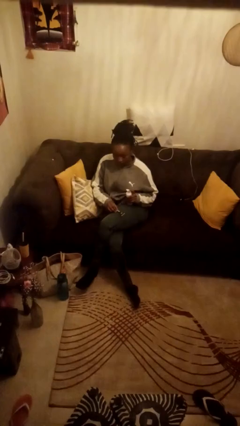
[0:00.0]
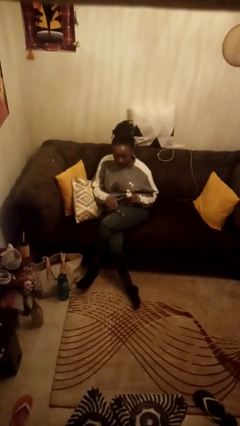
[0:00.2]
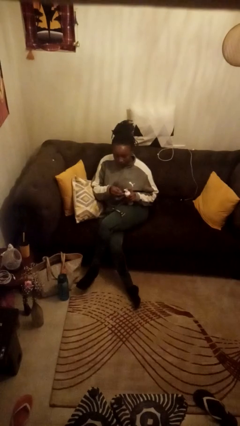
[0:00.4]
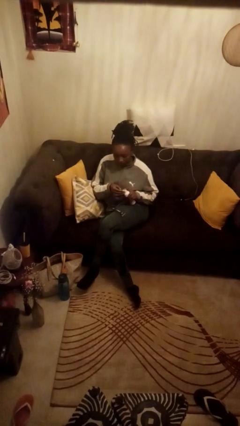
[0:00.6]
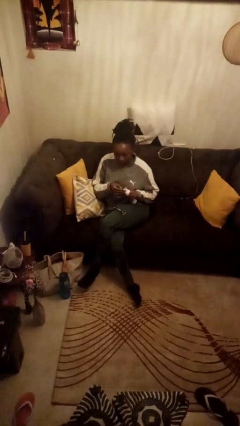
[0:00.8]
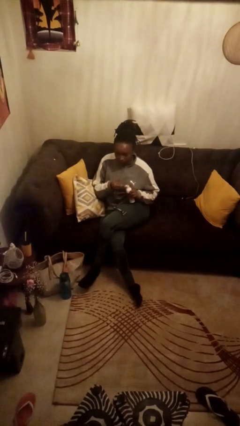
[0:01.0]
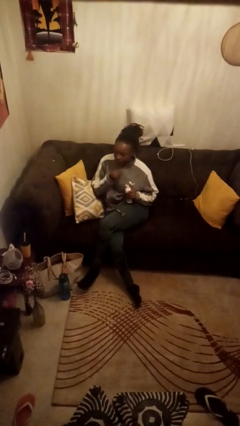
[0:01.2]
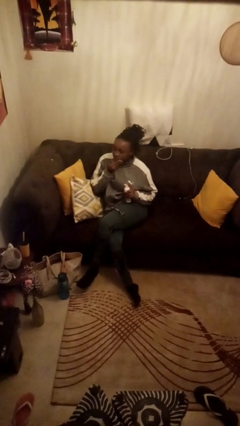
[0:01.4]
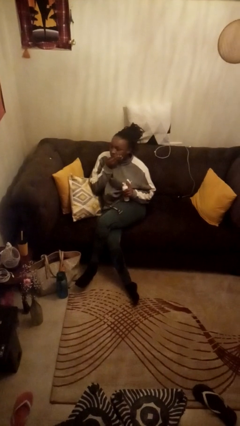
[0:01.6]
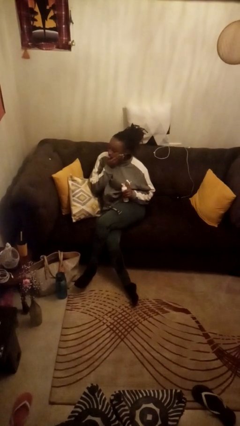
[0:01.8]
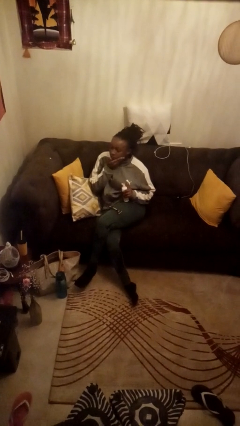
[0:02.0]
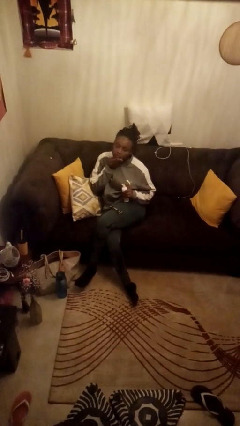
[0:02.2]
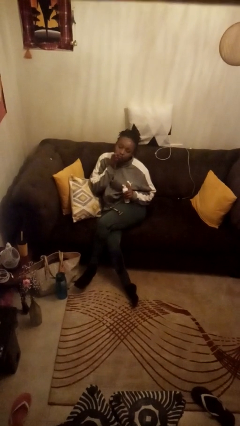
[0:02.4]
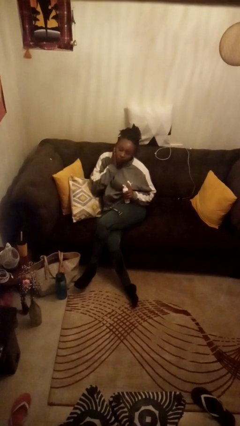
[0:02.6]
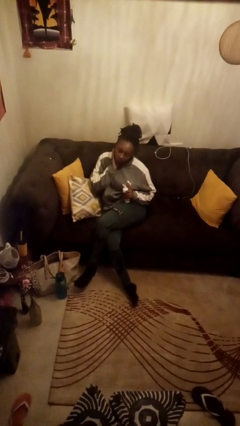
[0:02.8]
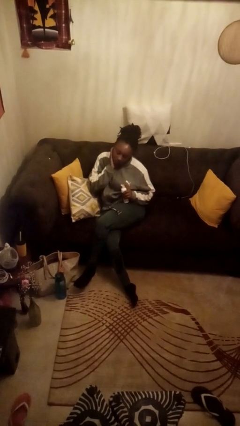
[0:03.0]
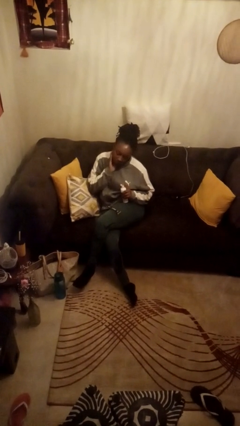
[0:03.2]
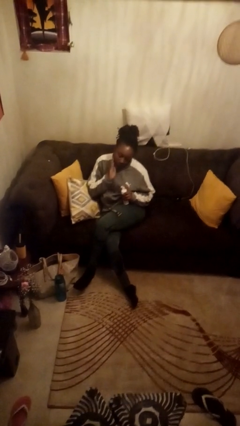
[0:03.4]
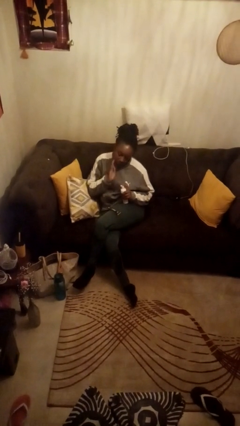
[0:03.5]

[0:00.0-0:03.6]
person applies shaving cream

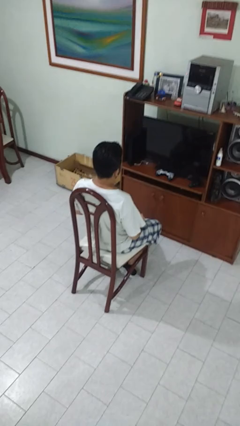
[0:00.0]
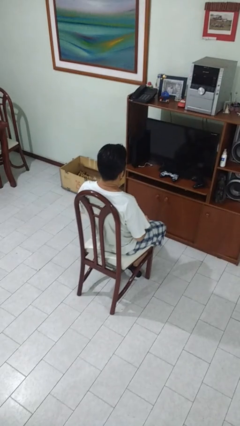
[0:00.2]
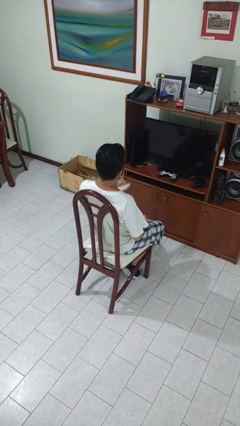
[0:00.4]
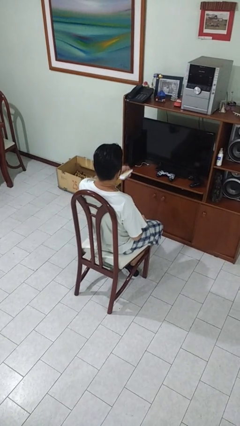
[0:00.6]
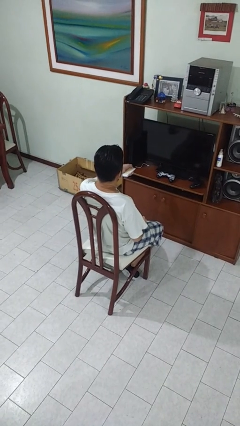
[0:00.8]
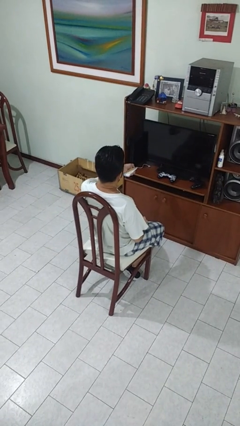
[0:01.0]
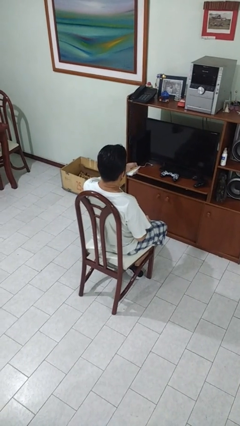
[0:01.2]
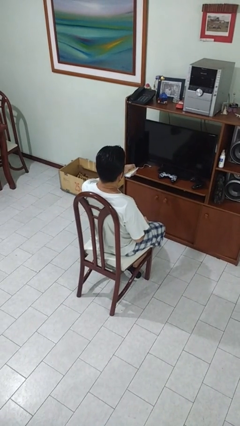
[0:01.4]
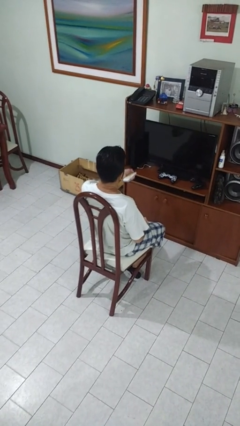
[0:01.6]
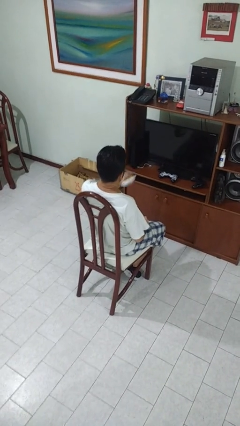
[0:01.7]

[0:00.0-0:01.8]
person uses television remote

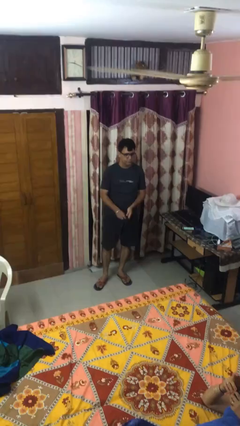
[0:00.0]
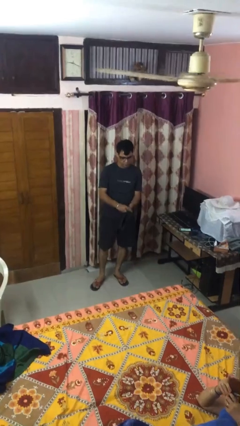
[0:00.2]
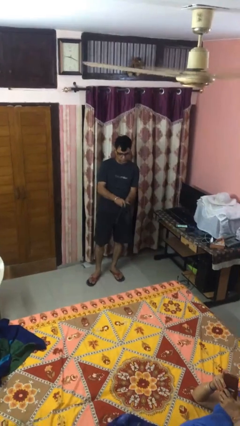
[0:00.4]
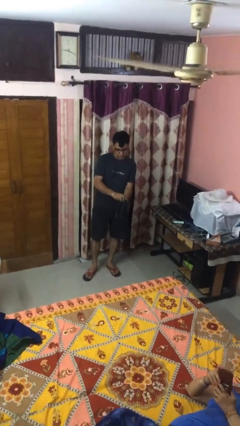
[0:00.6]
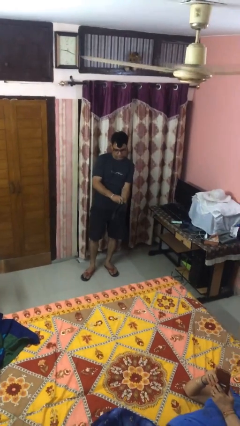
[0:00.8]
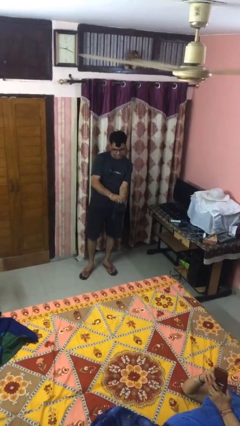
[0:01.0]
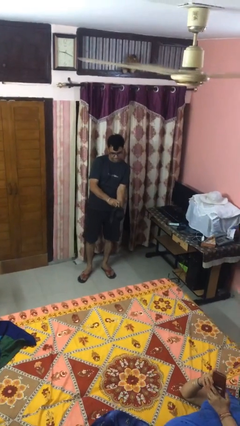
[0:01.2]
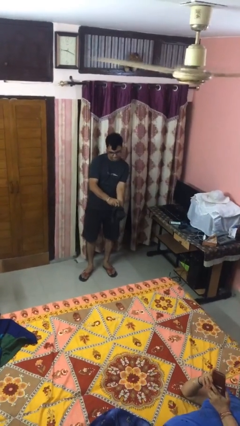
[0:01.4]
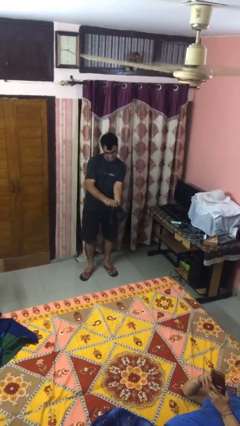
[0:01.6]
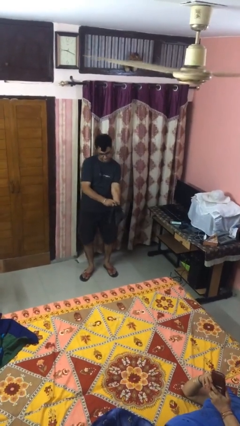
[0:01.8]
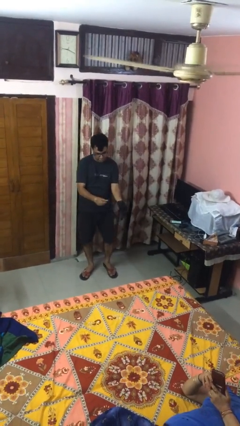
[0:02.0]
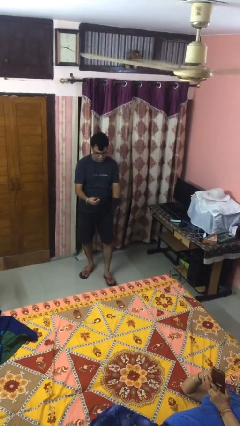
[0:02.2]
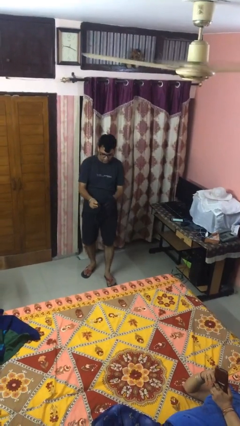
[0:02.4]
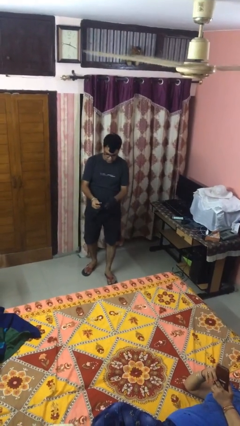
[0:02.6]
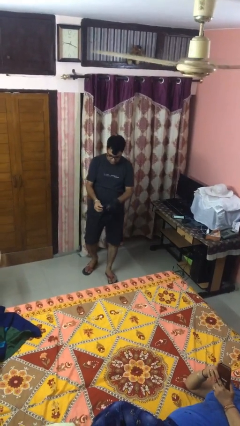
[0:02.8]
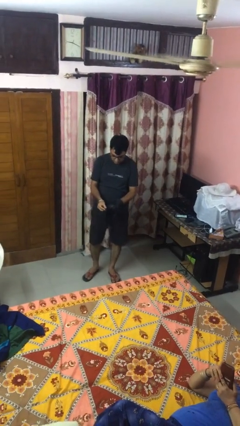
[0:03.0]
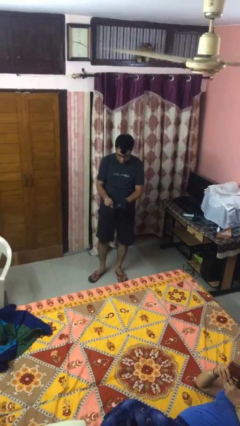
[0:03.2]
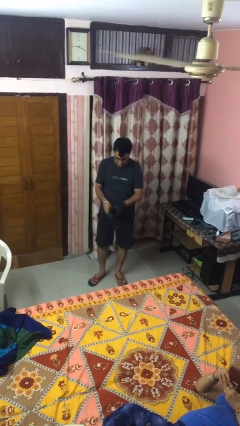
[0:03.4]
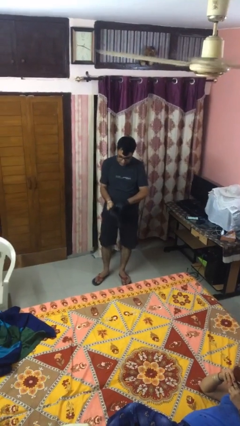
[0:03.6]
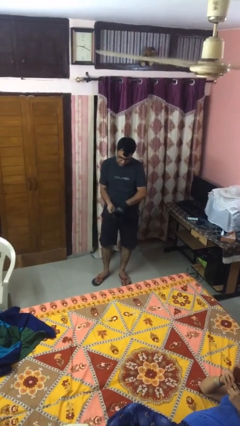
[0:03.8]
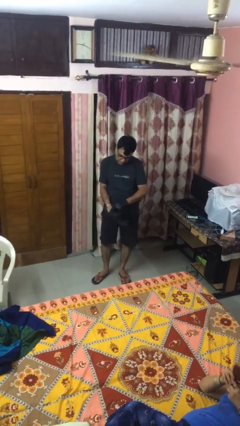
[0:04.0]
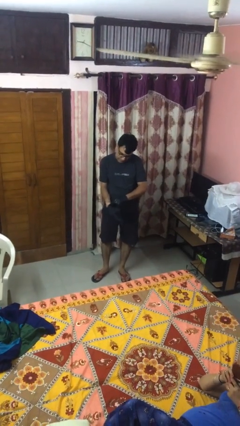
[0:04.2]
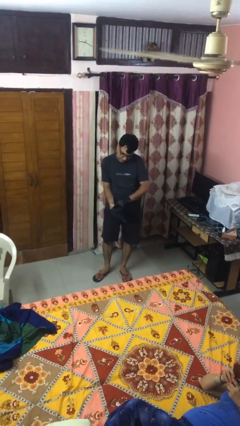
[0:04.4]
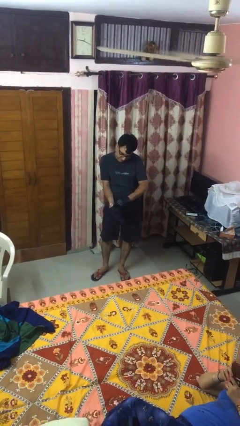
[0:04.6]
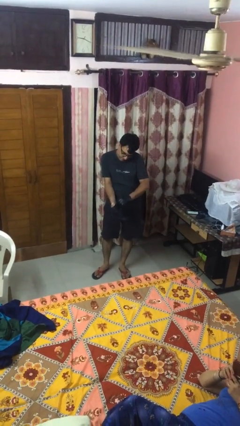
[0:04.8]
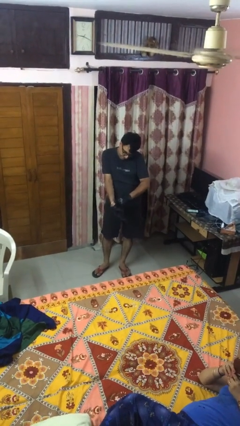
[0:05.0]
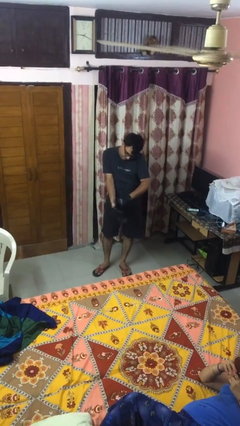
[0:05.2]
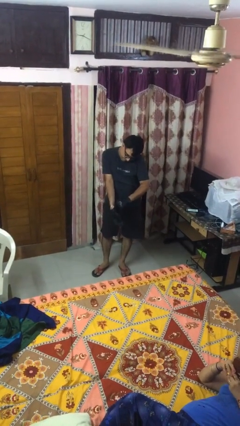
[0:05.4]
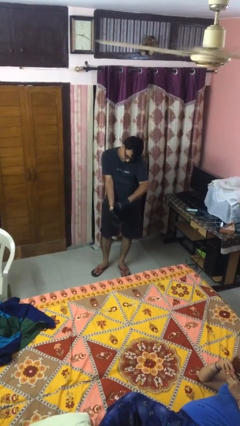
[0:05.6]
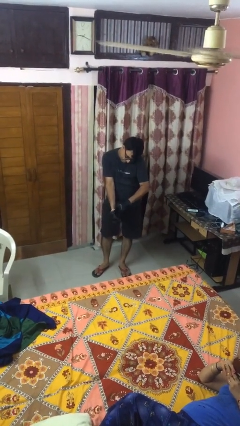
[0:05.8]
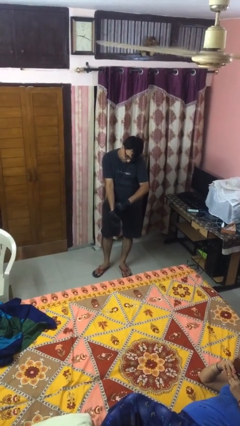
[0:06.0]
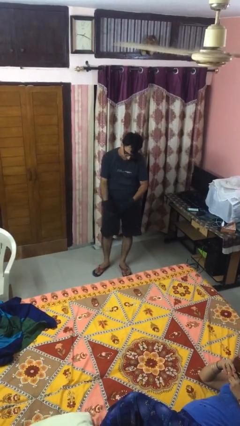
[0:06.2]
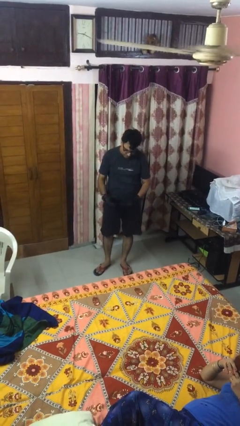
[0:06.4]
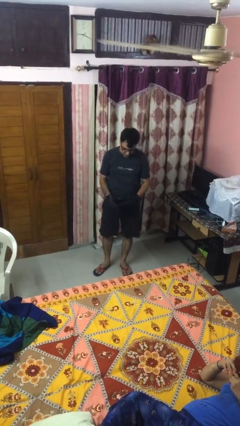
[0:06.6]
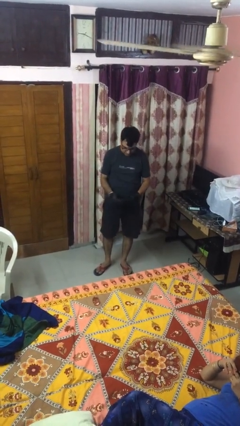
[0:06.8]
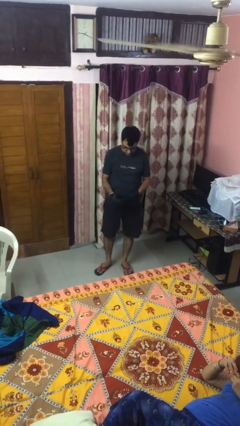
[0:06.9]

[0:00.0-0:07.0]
person puts on gloves

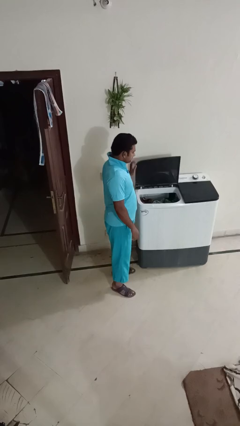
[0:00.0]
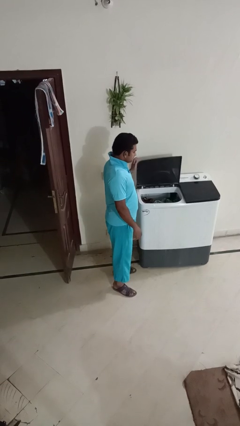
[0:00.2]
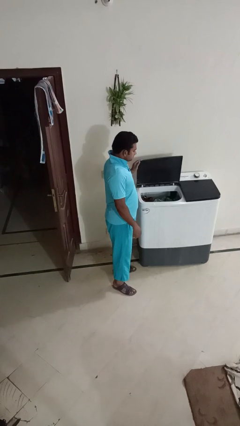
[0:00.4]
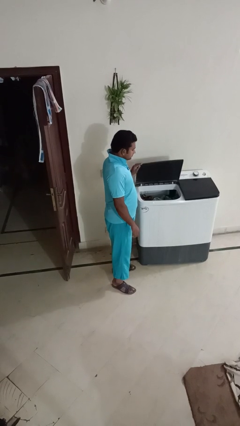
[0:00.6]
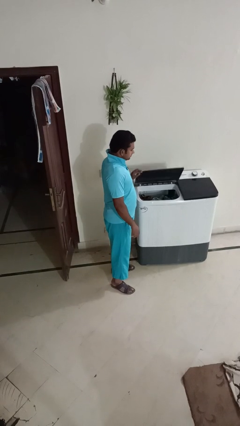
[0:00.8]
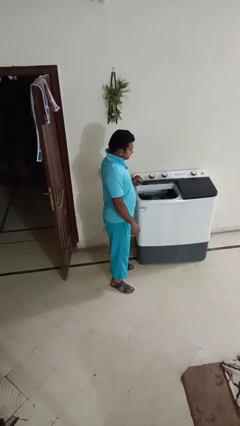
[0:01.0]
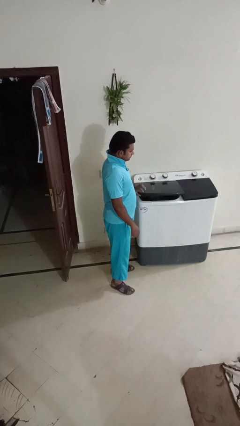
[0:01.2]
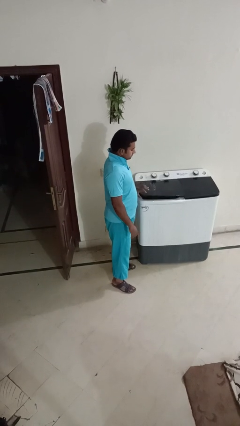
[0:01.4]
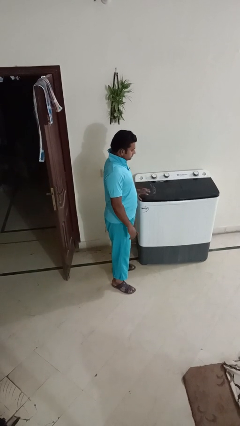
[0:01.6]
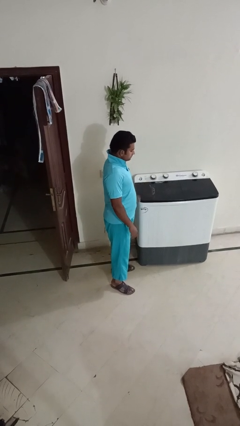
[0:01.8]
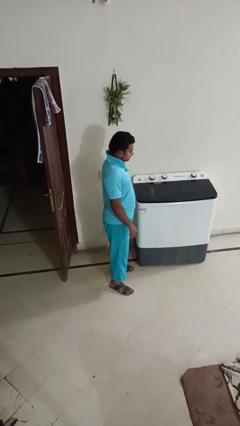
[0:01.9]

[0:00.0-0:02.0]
person closes clothes washer

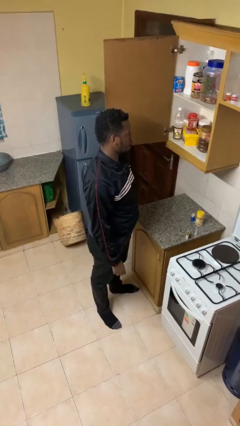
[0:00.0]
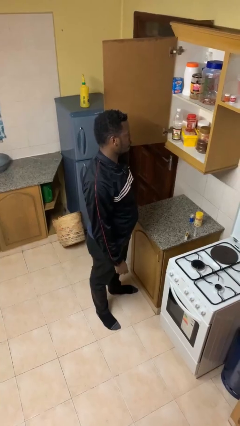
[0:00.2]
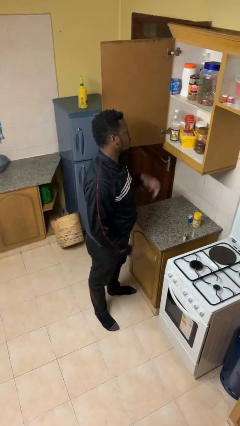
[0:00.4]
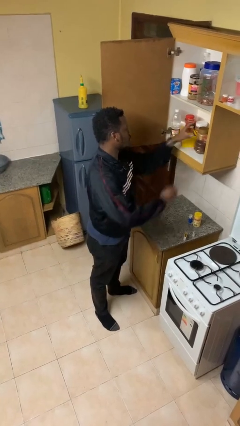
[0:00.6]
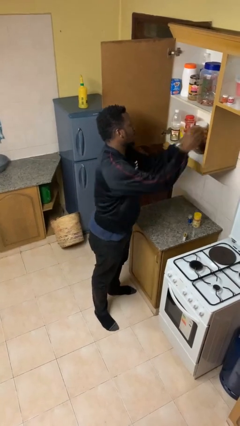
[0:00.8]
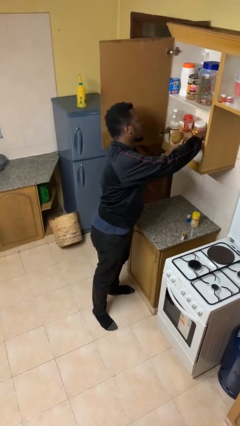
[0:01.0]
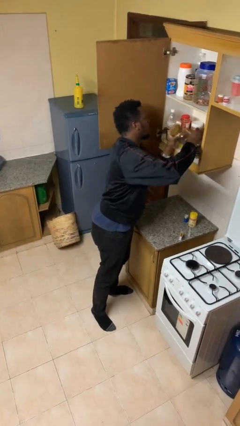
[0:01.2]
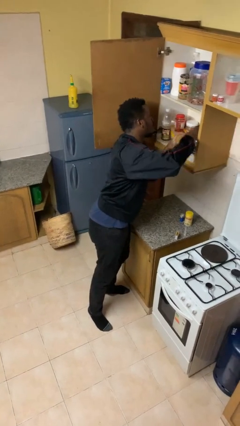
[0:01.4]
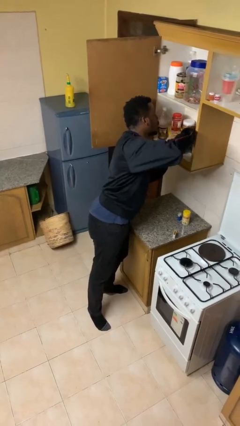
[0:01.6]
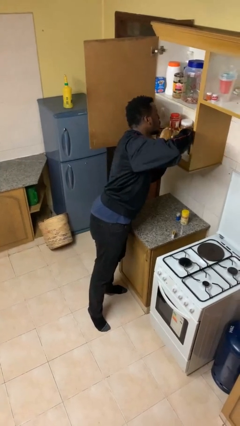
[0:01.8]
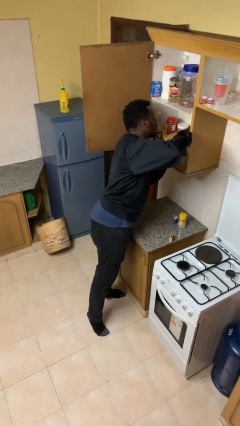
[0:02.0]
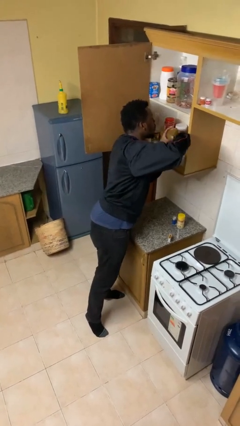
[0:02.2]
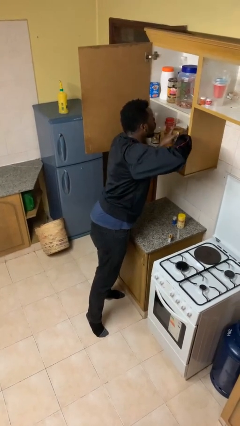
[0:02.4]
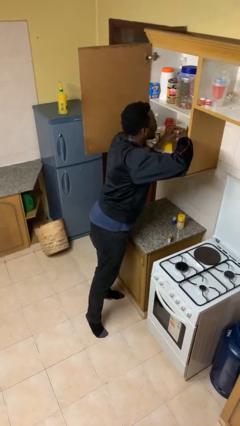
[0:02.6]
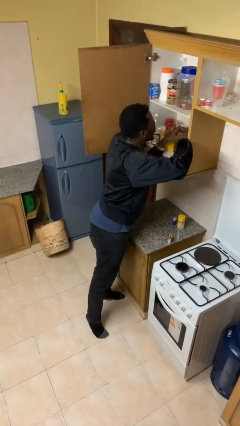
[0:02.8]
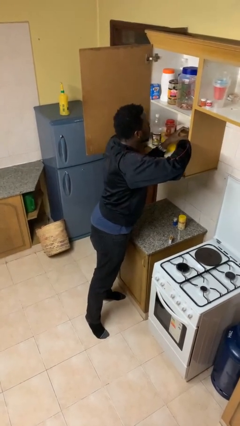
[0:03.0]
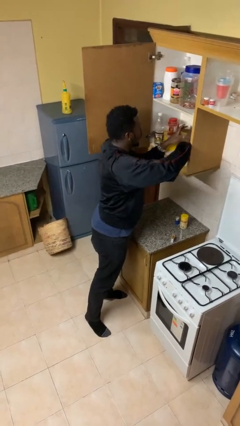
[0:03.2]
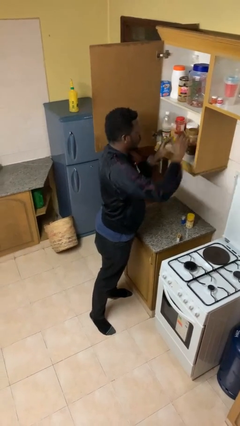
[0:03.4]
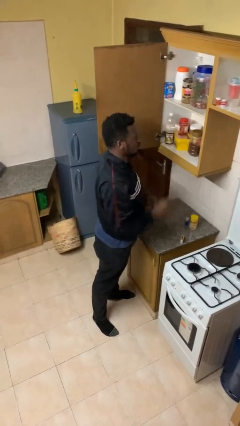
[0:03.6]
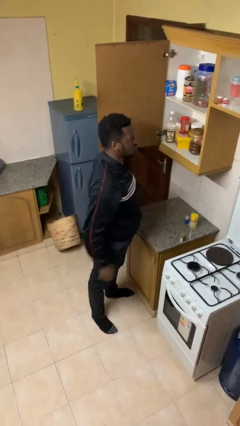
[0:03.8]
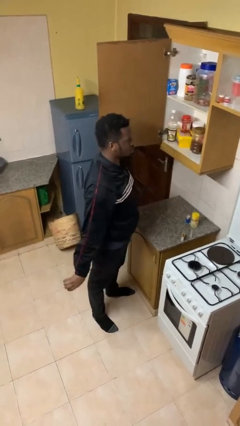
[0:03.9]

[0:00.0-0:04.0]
person searches in cabinet
